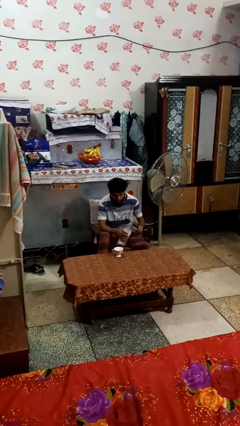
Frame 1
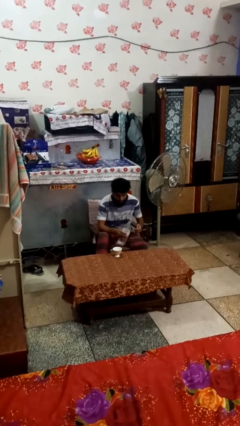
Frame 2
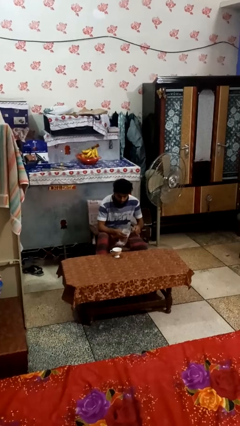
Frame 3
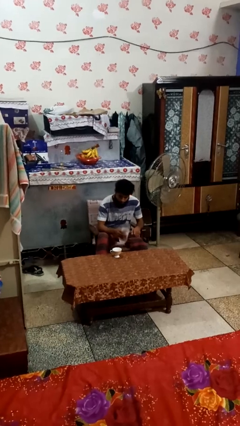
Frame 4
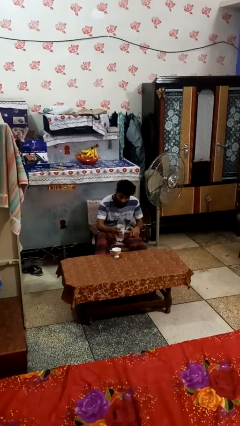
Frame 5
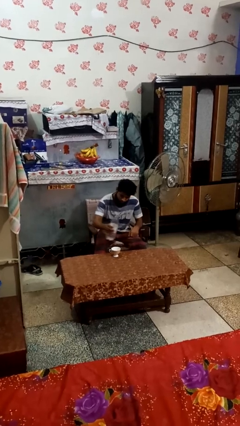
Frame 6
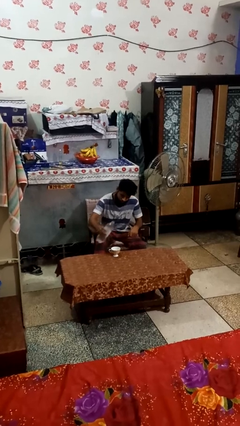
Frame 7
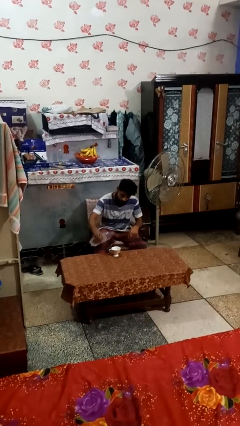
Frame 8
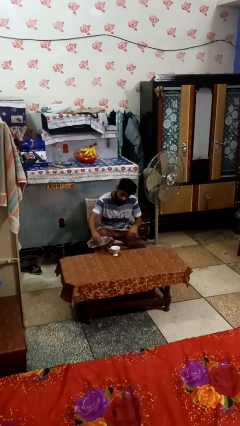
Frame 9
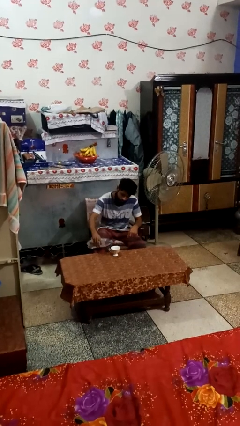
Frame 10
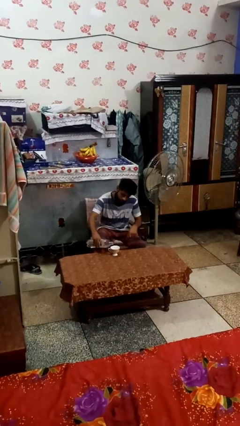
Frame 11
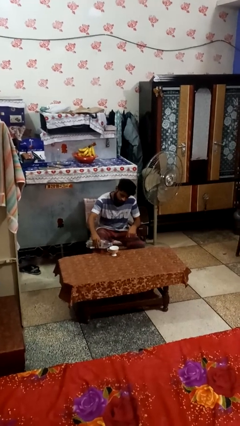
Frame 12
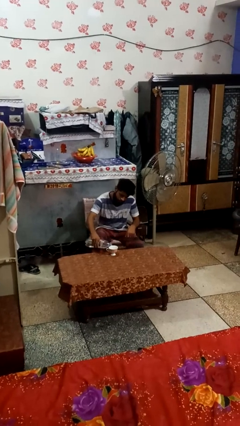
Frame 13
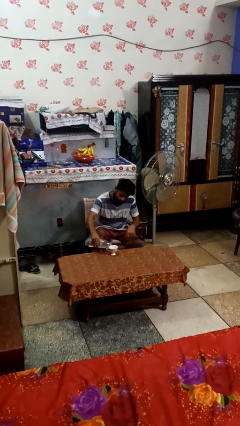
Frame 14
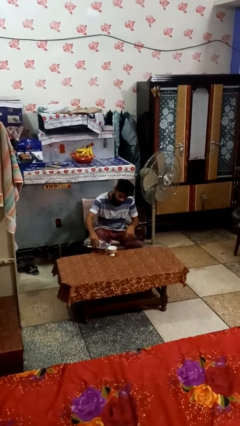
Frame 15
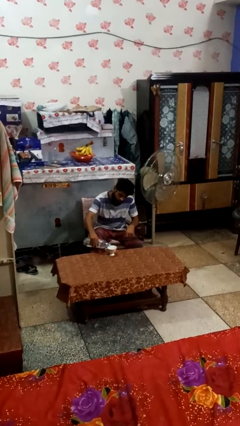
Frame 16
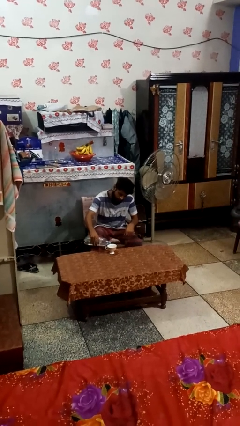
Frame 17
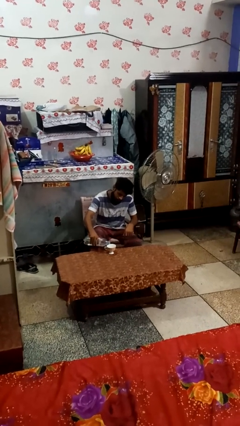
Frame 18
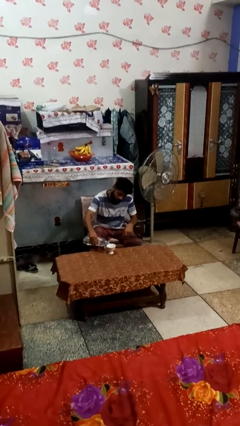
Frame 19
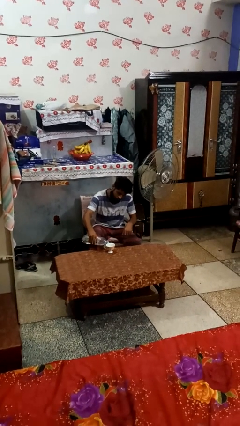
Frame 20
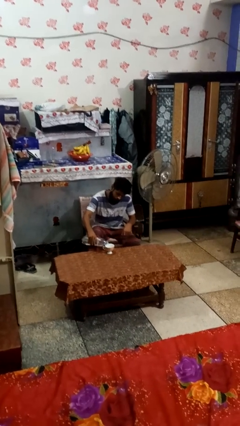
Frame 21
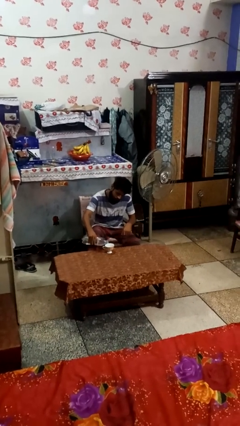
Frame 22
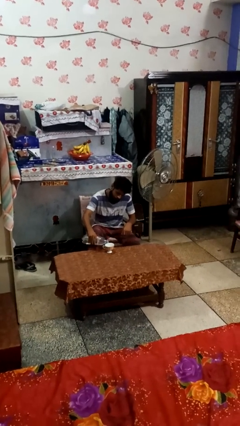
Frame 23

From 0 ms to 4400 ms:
person pours liquid into cup

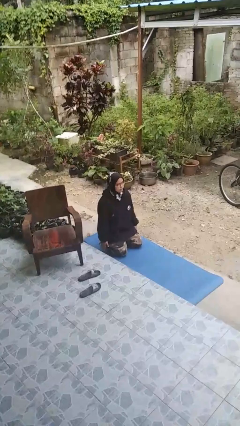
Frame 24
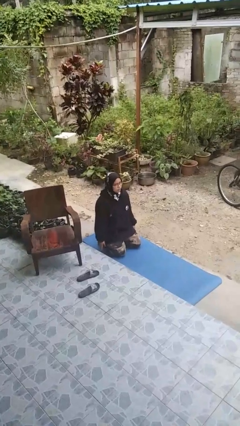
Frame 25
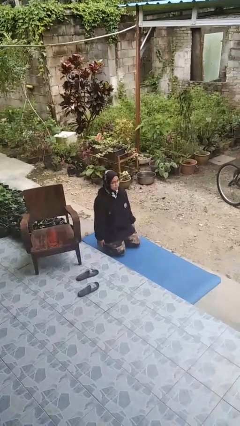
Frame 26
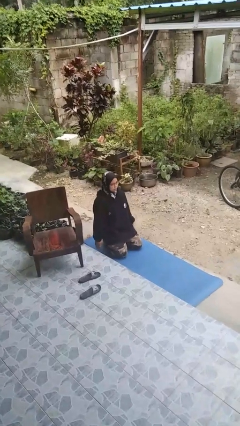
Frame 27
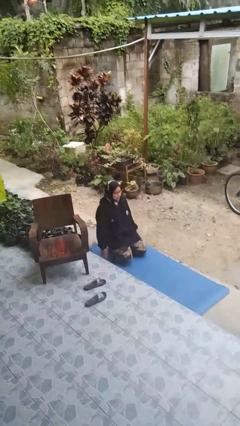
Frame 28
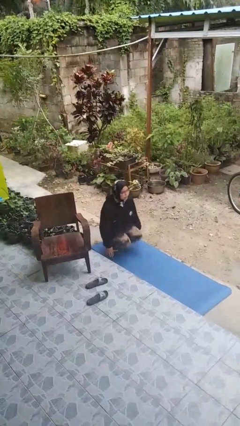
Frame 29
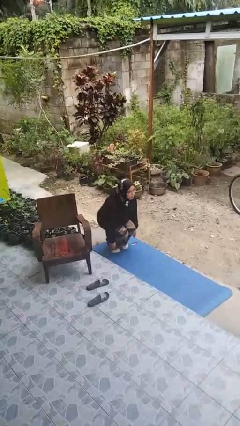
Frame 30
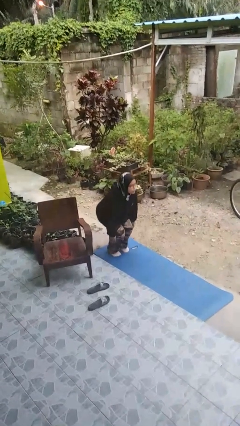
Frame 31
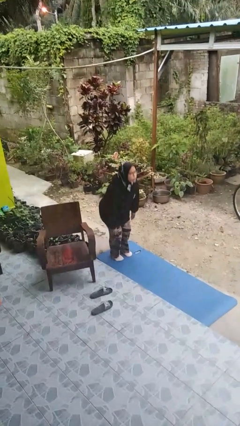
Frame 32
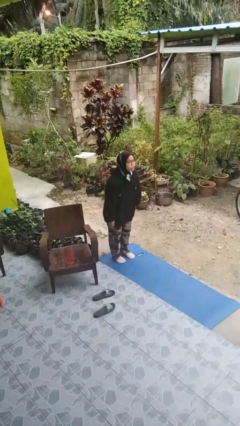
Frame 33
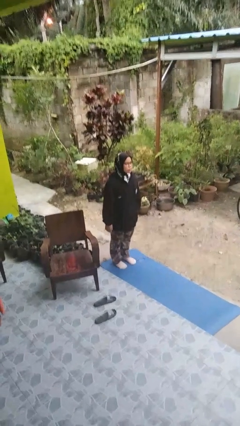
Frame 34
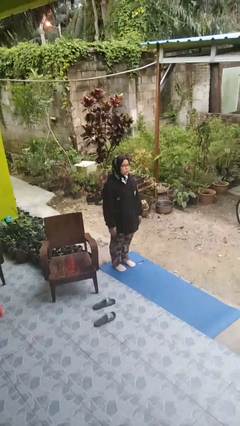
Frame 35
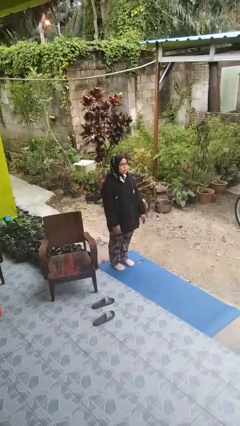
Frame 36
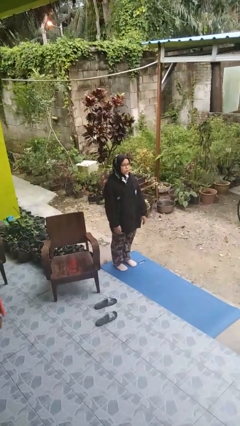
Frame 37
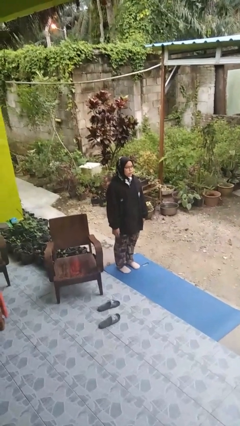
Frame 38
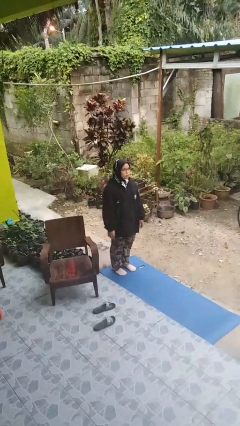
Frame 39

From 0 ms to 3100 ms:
person stands up from floor

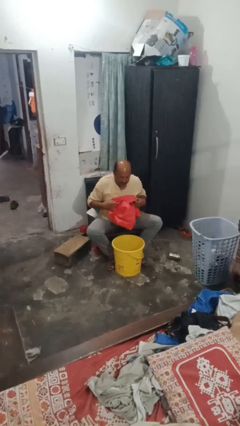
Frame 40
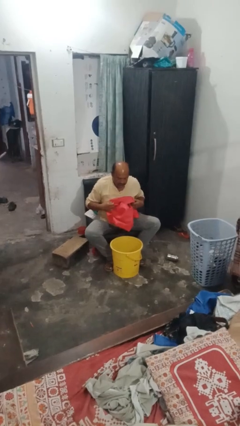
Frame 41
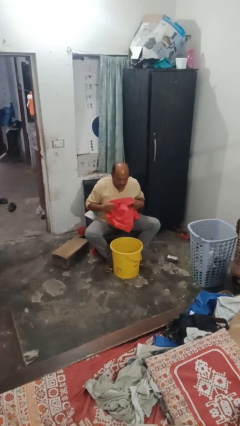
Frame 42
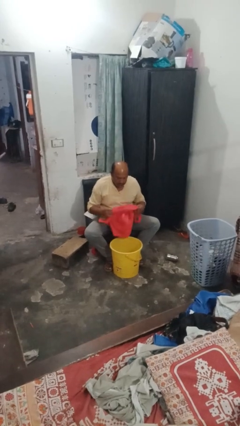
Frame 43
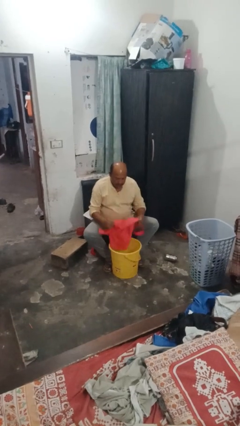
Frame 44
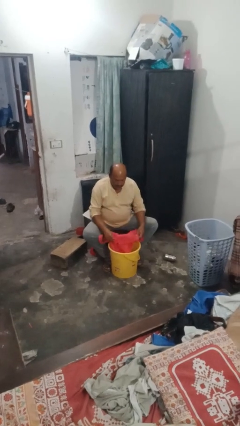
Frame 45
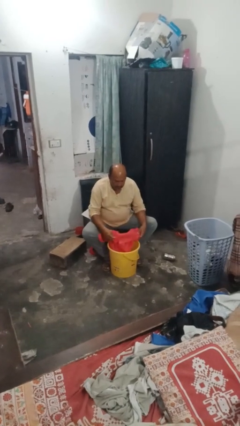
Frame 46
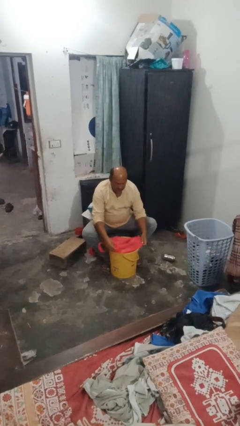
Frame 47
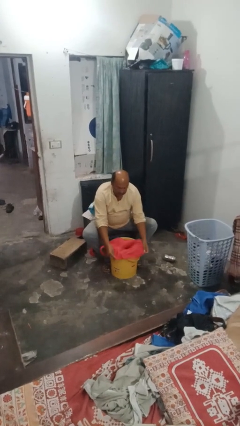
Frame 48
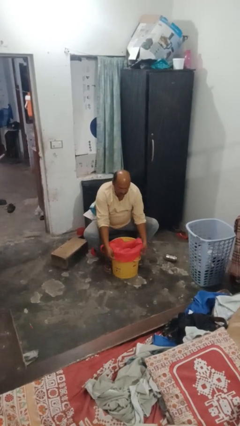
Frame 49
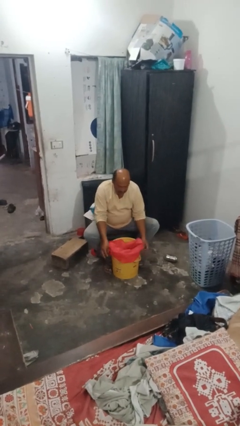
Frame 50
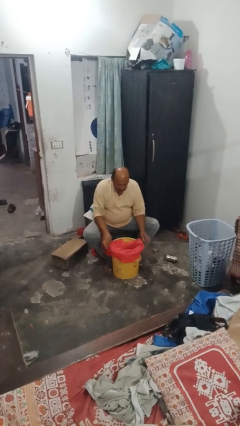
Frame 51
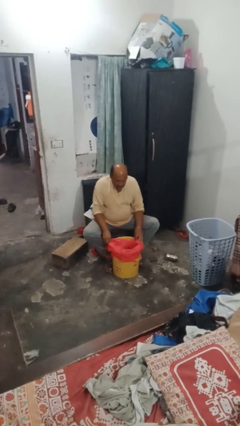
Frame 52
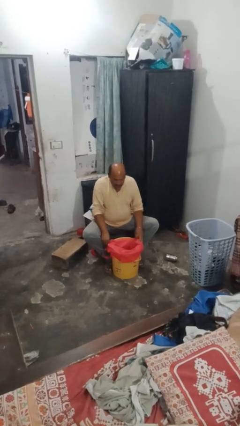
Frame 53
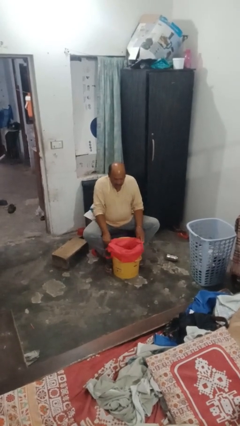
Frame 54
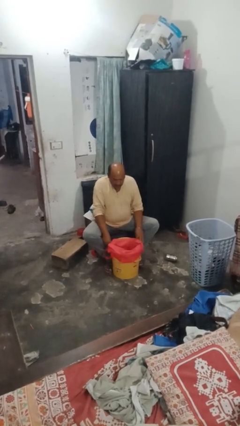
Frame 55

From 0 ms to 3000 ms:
person inserts trashbag into trashcan

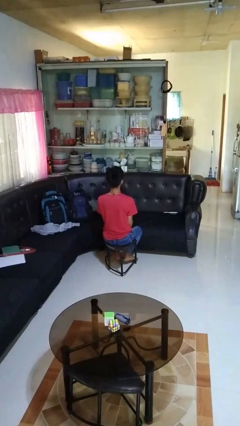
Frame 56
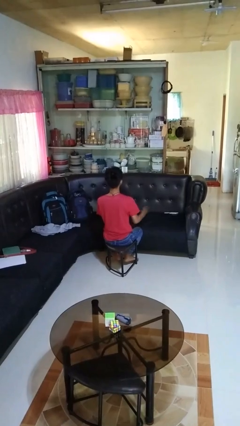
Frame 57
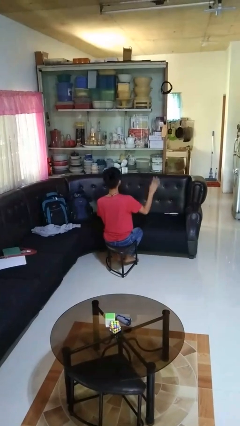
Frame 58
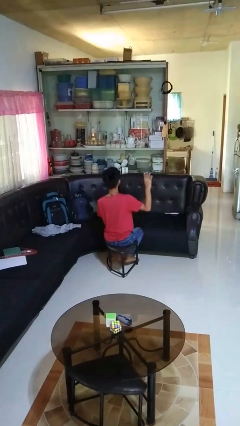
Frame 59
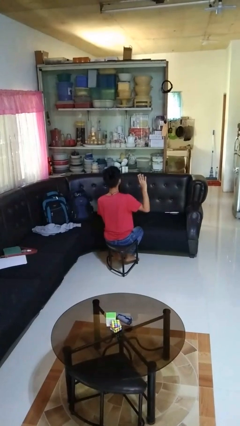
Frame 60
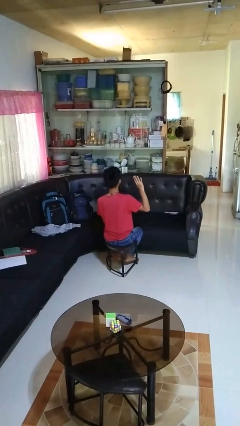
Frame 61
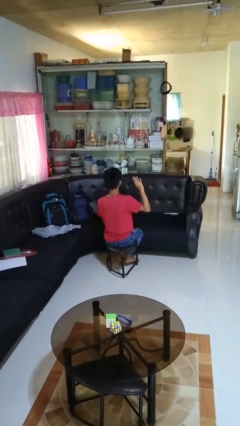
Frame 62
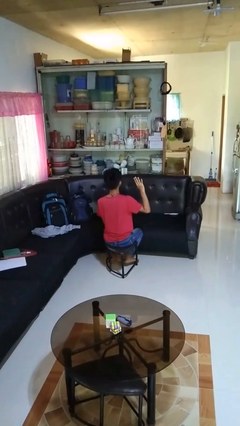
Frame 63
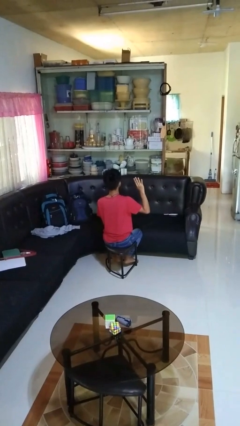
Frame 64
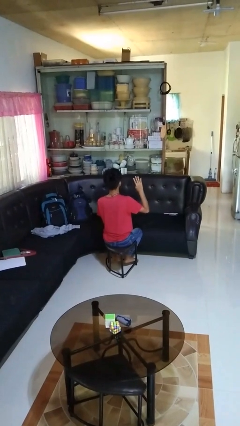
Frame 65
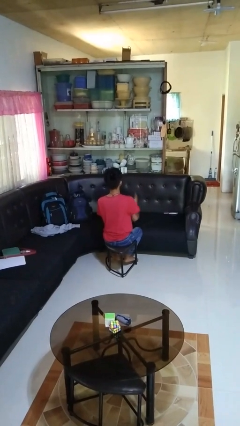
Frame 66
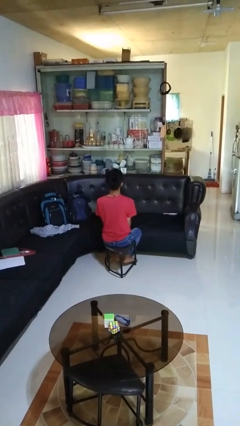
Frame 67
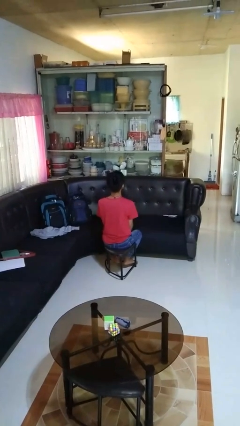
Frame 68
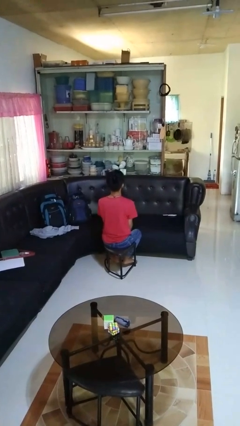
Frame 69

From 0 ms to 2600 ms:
person gestures number four

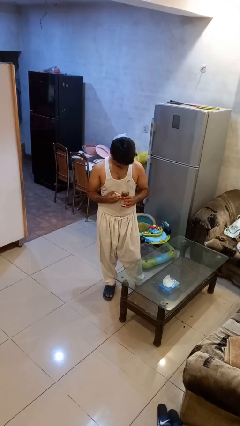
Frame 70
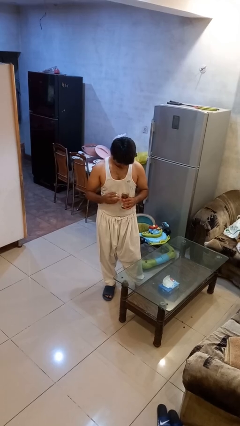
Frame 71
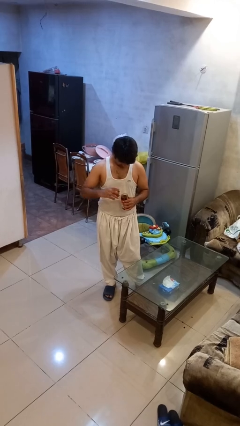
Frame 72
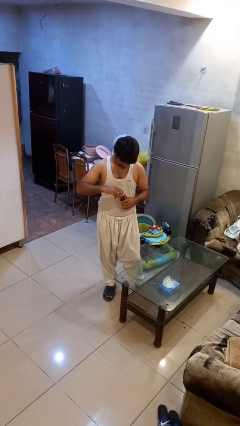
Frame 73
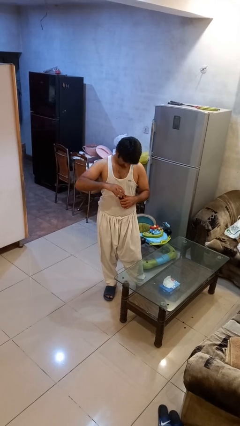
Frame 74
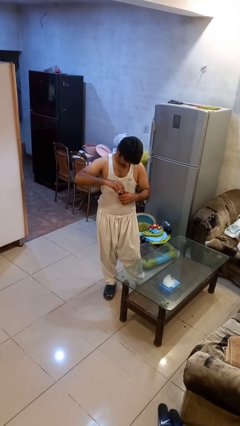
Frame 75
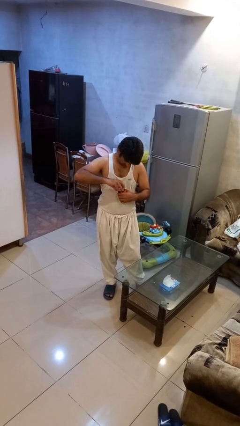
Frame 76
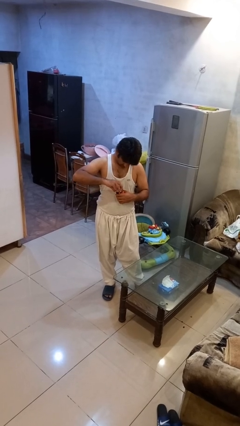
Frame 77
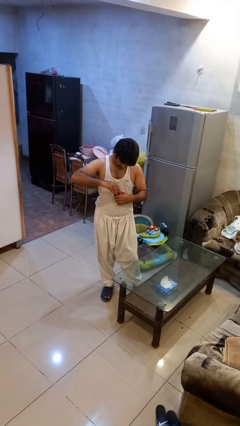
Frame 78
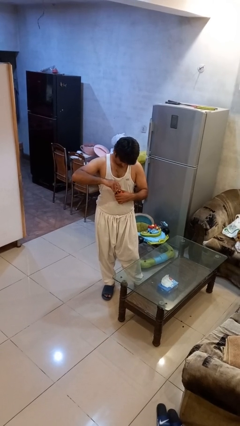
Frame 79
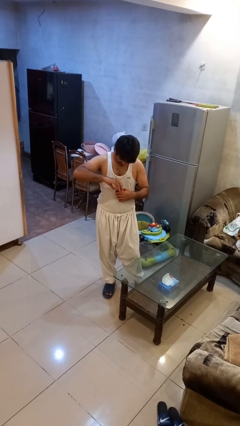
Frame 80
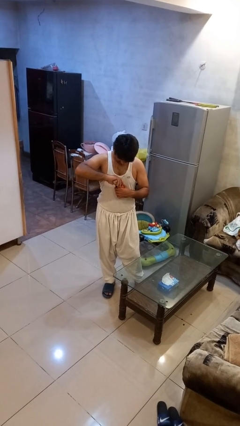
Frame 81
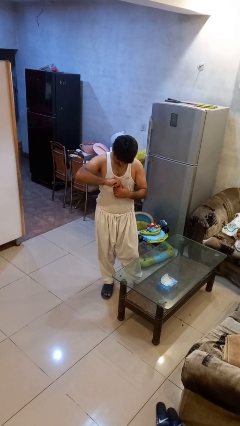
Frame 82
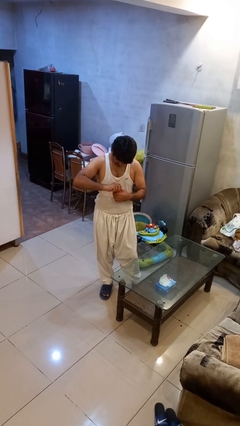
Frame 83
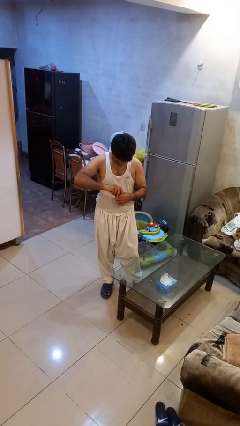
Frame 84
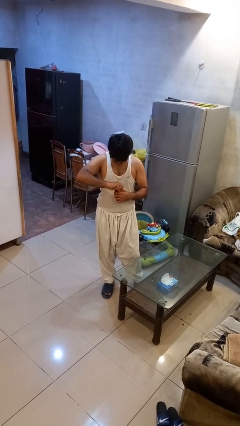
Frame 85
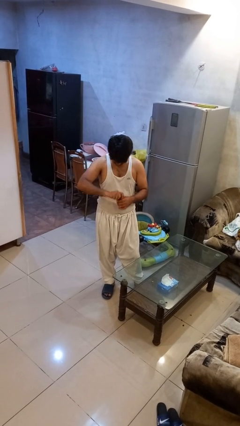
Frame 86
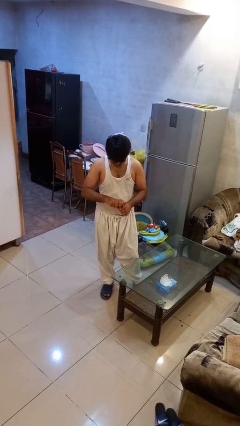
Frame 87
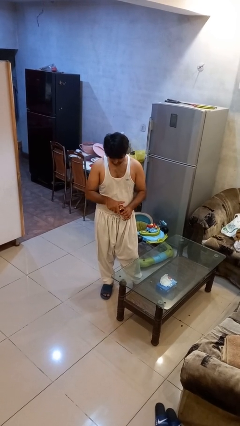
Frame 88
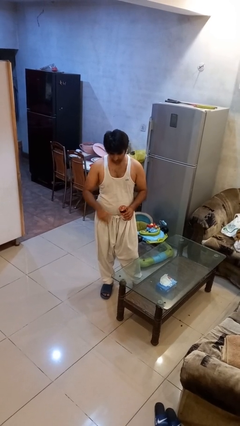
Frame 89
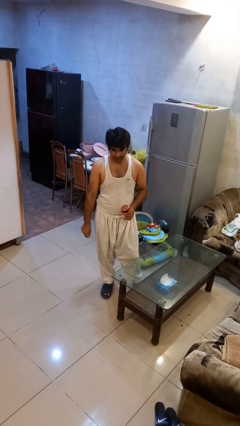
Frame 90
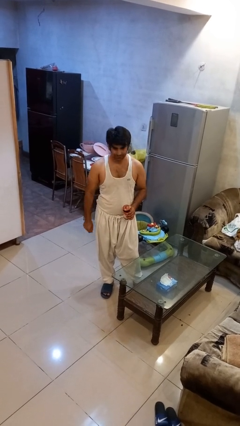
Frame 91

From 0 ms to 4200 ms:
person closes jar

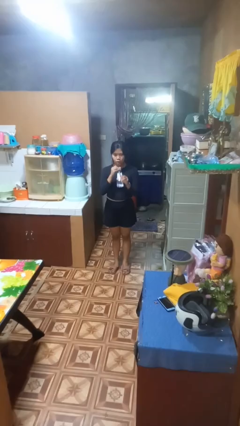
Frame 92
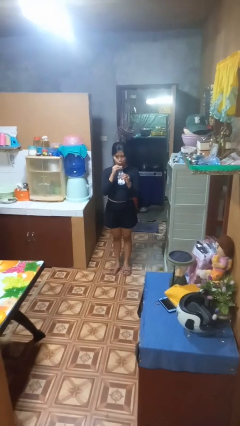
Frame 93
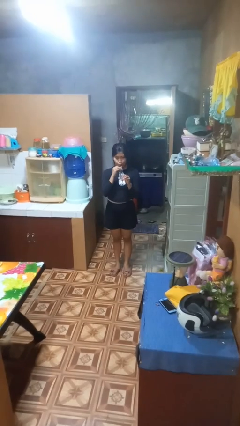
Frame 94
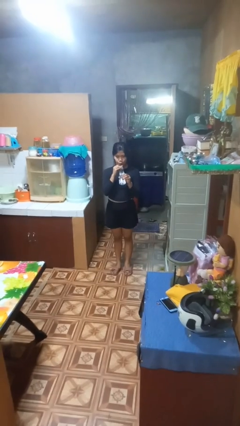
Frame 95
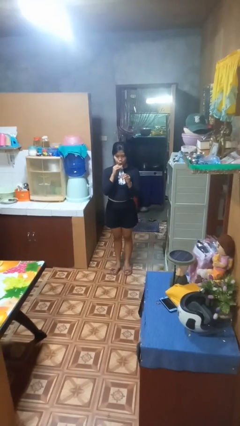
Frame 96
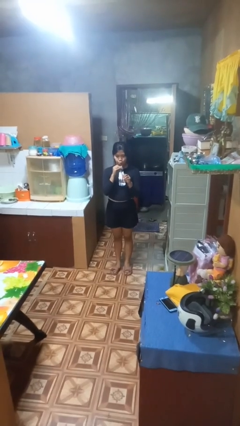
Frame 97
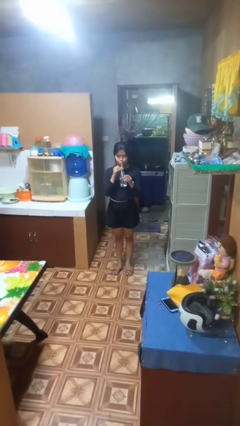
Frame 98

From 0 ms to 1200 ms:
person drinks from straw
